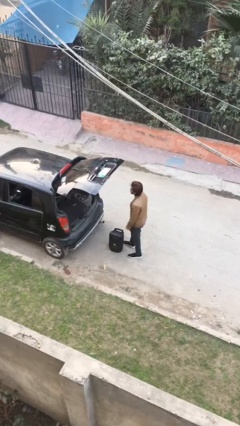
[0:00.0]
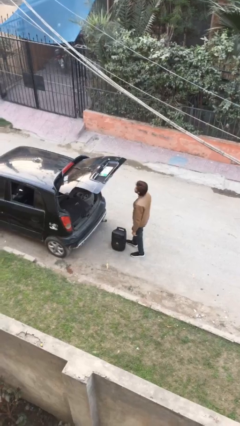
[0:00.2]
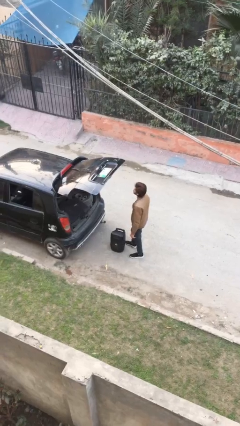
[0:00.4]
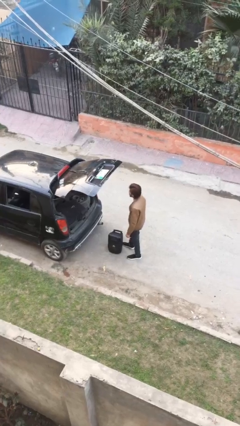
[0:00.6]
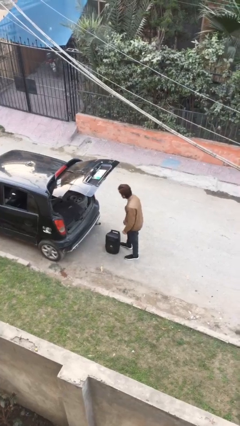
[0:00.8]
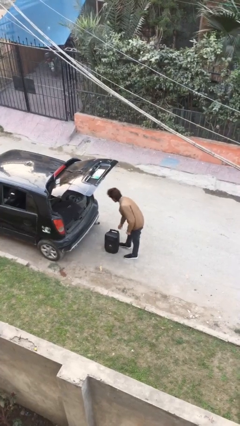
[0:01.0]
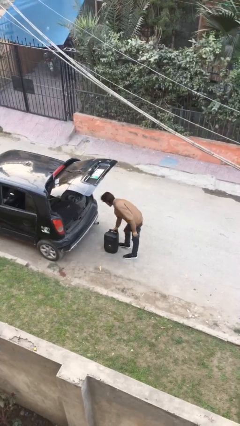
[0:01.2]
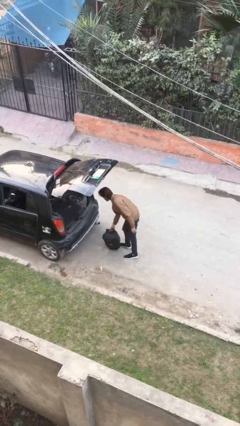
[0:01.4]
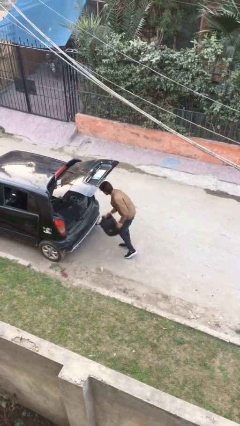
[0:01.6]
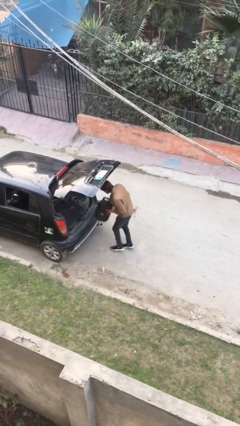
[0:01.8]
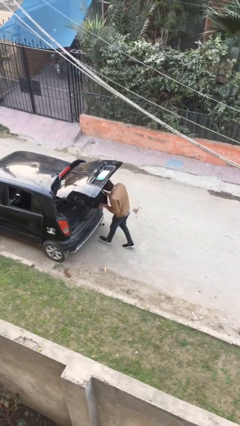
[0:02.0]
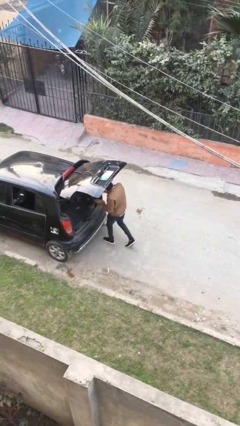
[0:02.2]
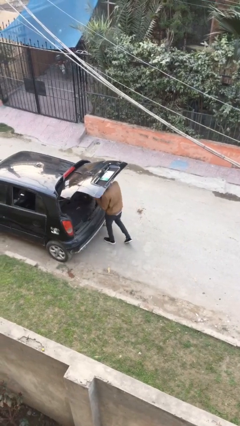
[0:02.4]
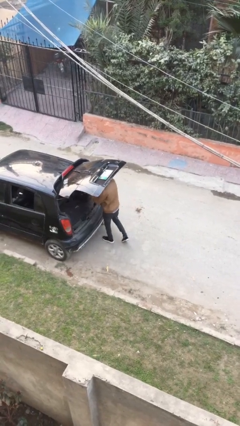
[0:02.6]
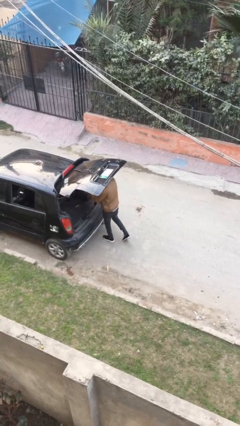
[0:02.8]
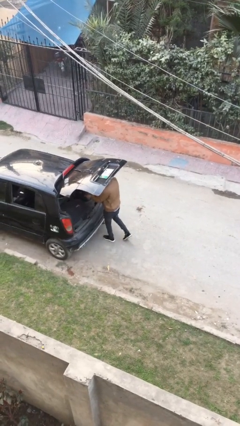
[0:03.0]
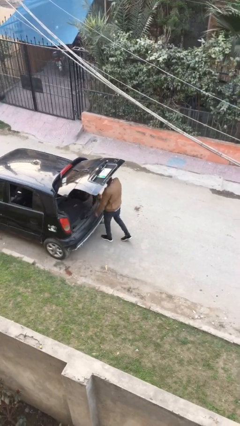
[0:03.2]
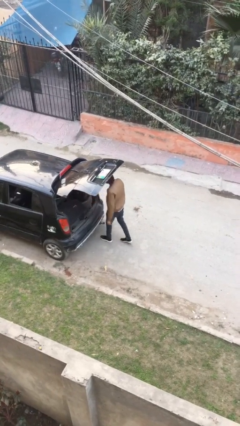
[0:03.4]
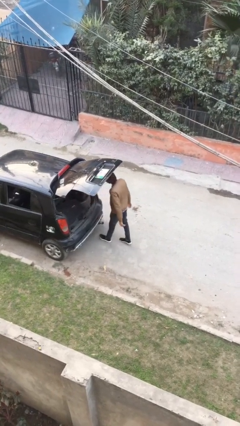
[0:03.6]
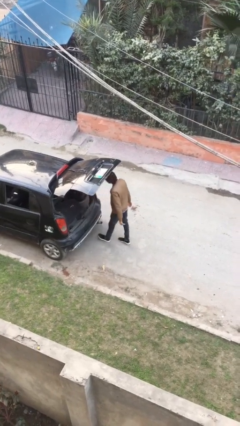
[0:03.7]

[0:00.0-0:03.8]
person loads car

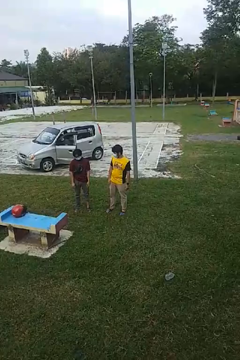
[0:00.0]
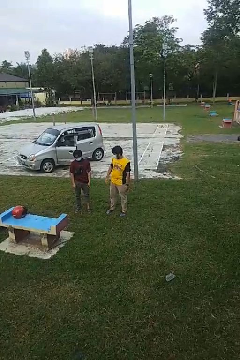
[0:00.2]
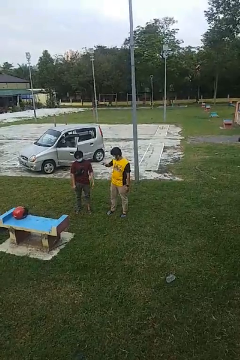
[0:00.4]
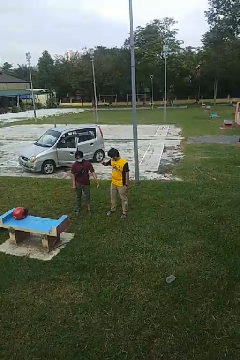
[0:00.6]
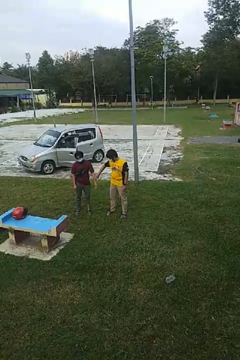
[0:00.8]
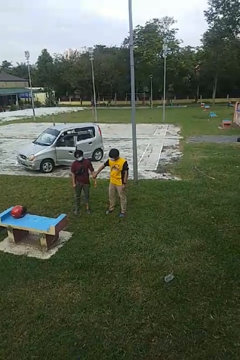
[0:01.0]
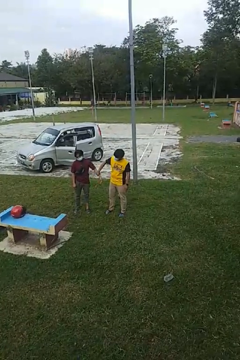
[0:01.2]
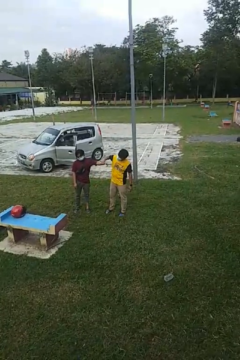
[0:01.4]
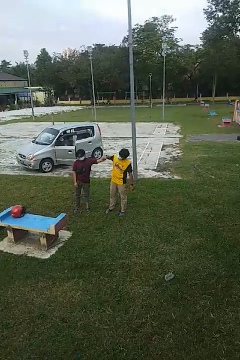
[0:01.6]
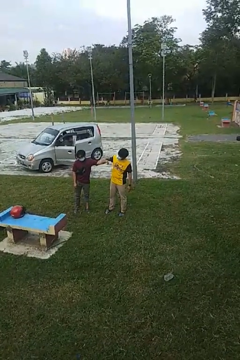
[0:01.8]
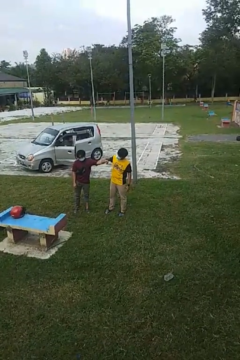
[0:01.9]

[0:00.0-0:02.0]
person grabs person by forearm

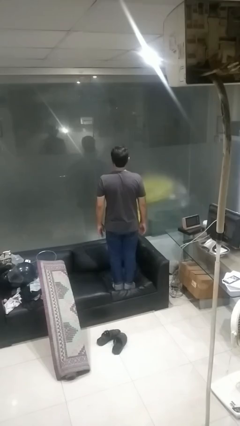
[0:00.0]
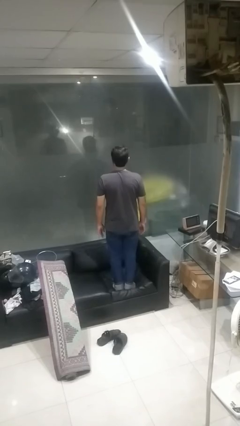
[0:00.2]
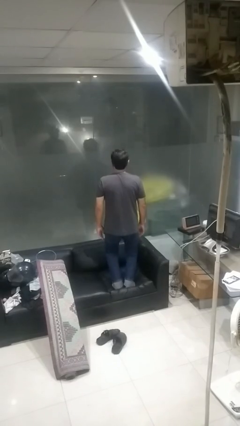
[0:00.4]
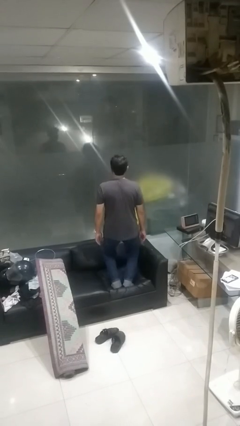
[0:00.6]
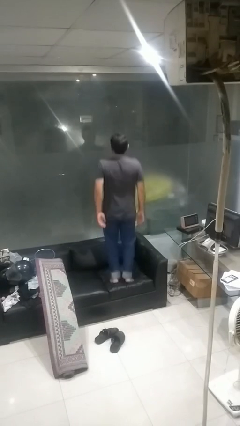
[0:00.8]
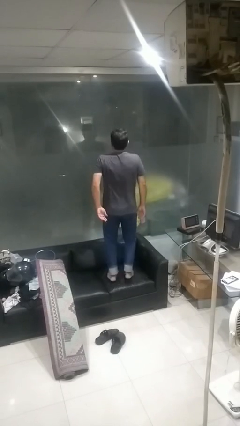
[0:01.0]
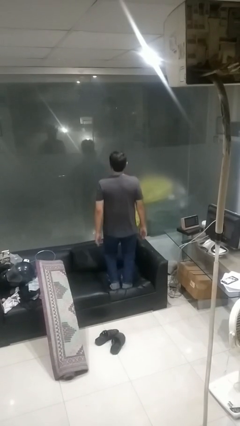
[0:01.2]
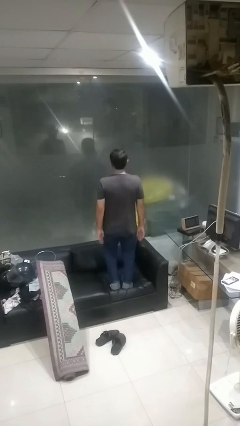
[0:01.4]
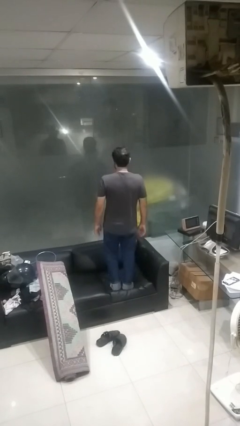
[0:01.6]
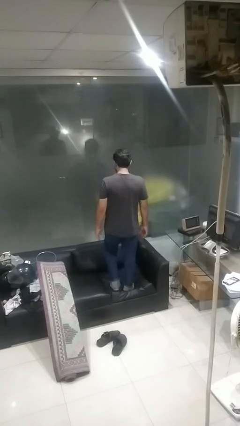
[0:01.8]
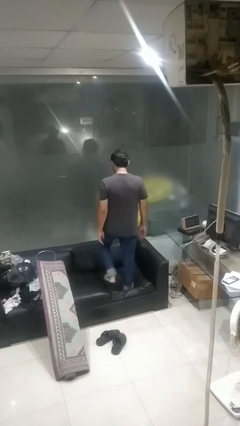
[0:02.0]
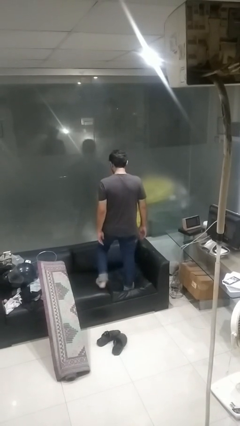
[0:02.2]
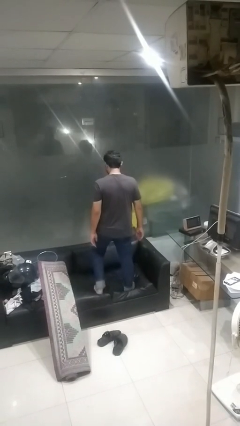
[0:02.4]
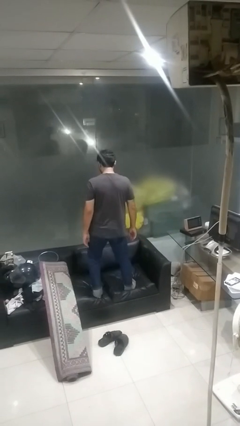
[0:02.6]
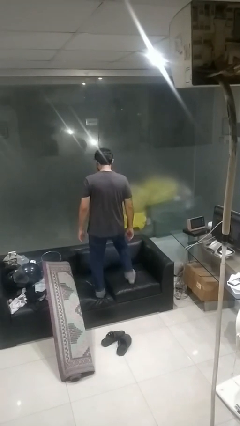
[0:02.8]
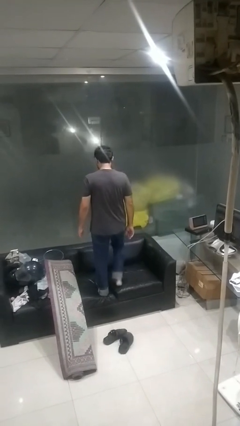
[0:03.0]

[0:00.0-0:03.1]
person jumps on couch

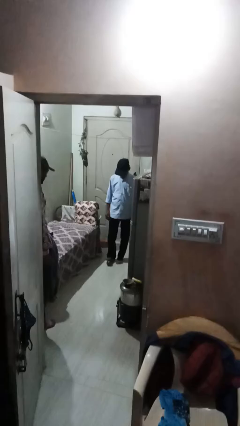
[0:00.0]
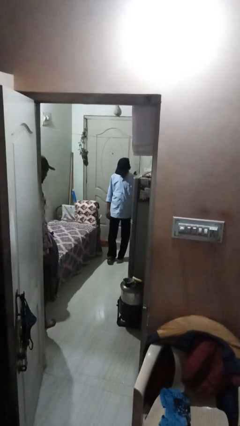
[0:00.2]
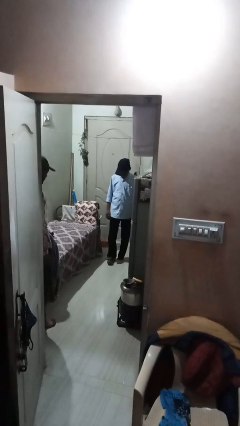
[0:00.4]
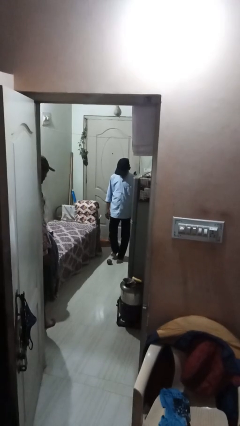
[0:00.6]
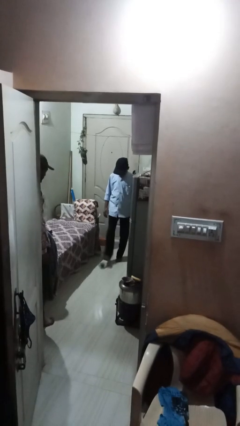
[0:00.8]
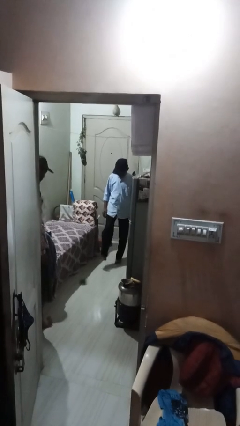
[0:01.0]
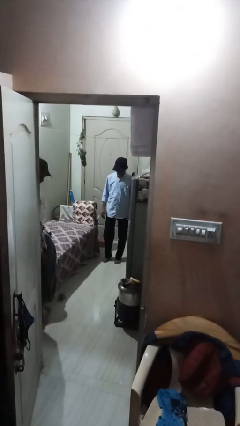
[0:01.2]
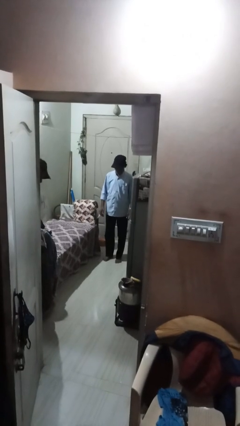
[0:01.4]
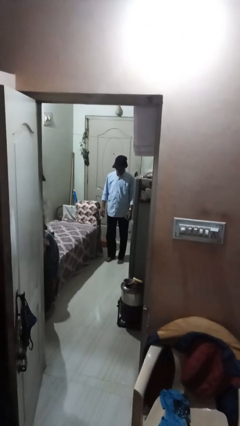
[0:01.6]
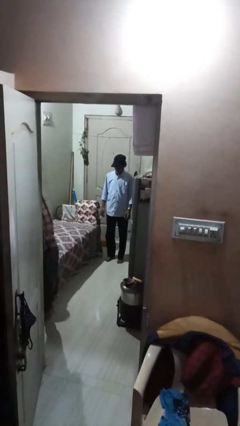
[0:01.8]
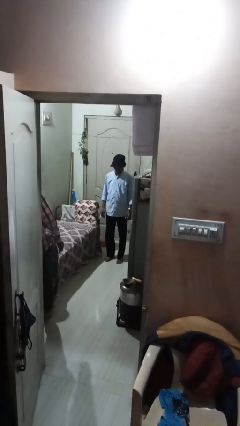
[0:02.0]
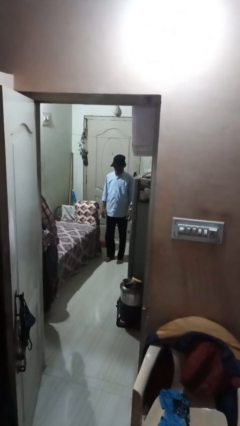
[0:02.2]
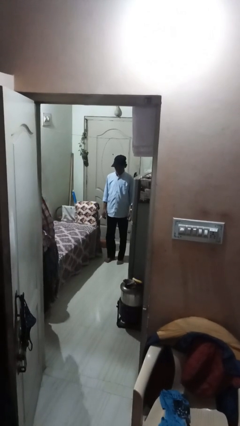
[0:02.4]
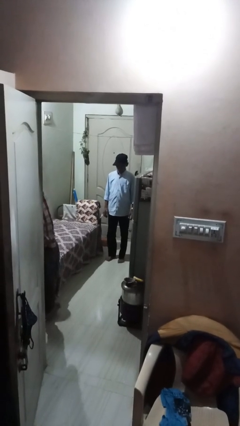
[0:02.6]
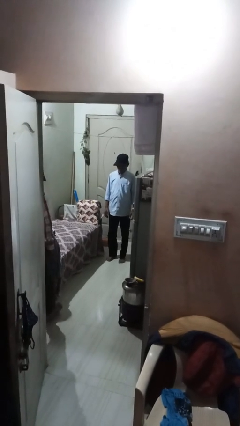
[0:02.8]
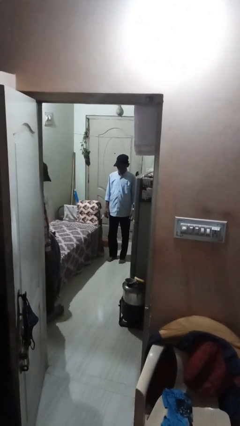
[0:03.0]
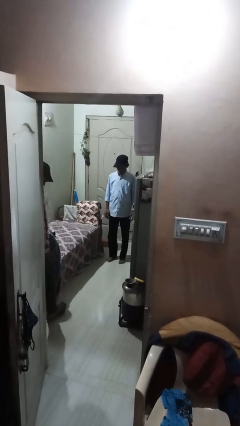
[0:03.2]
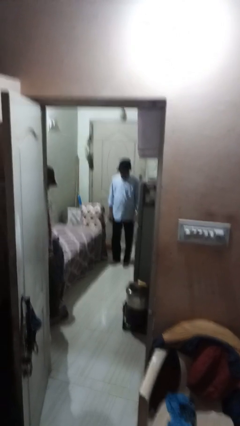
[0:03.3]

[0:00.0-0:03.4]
person kicks object to person

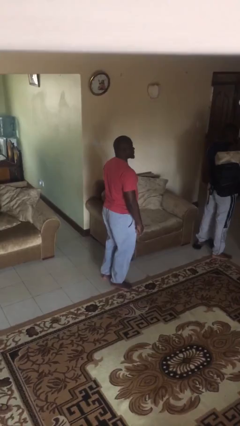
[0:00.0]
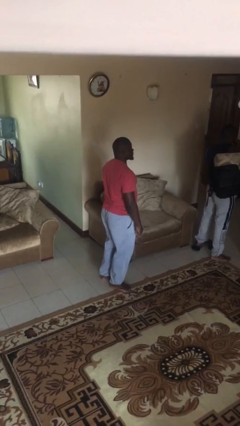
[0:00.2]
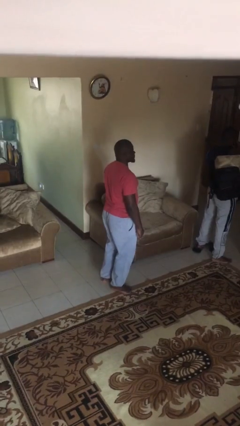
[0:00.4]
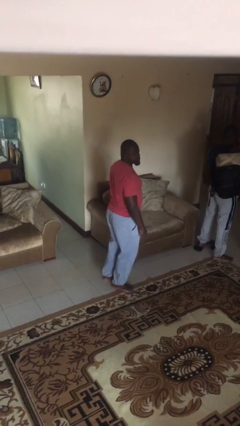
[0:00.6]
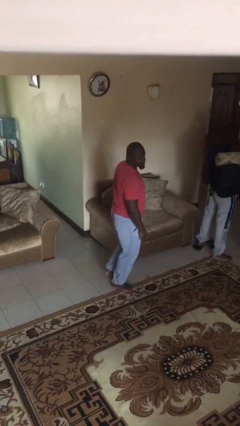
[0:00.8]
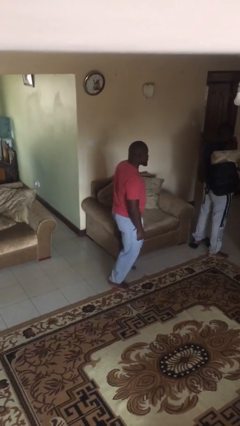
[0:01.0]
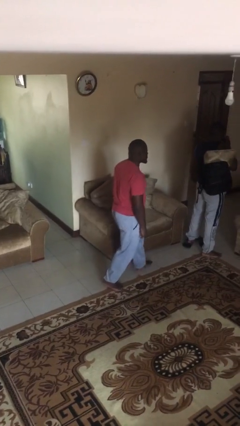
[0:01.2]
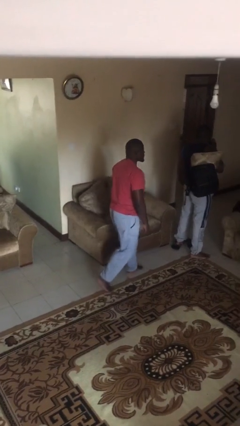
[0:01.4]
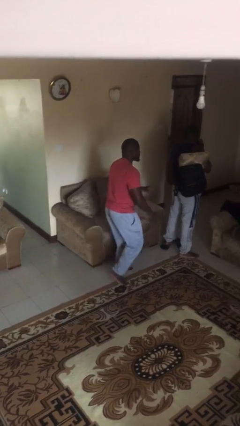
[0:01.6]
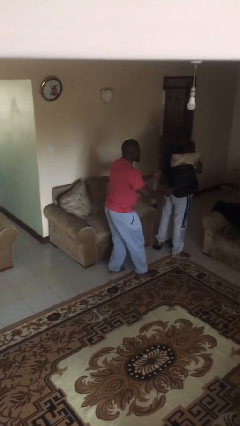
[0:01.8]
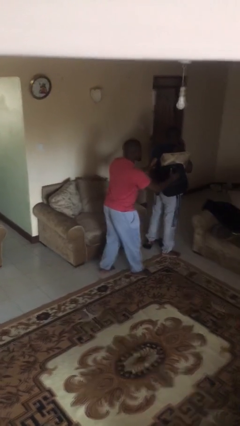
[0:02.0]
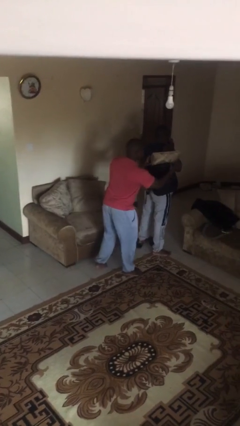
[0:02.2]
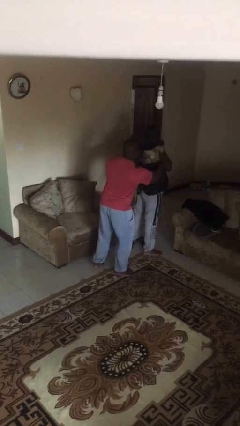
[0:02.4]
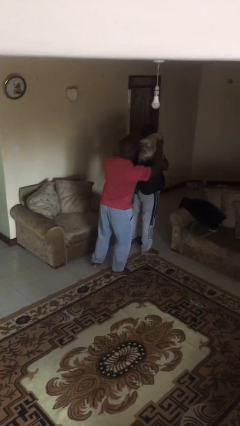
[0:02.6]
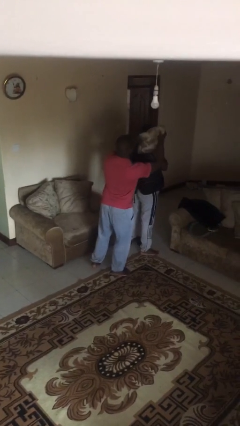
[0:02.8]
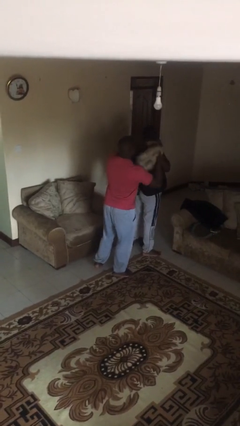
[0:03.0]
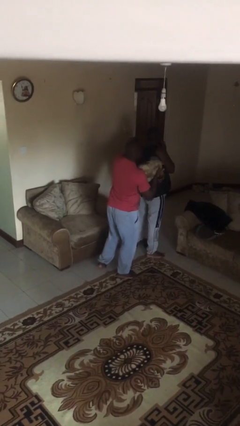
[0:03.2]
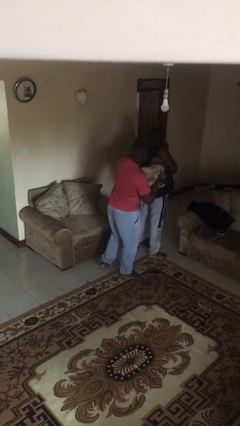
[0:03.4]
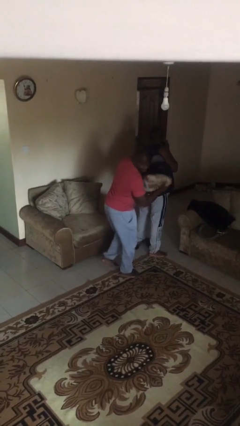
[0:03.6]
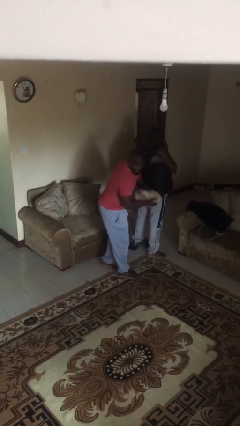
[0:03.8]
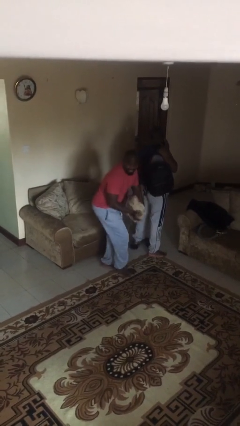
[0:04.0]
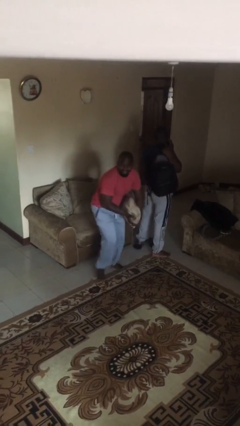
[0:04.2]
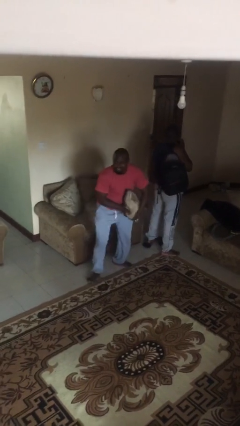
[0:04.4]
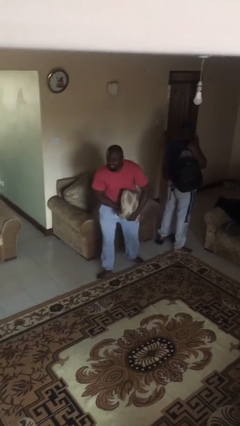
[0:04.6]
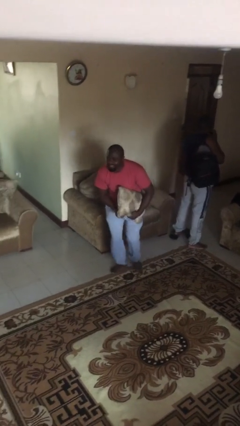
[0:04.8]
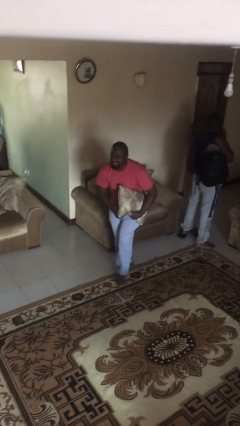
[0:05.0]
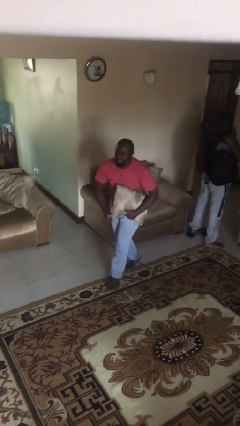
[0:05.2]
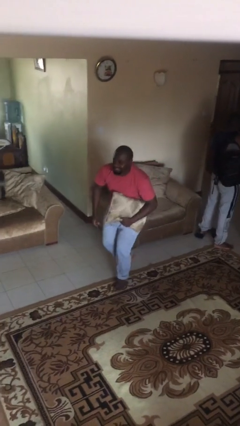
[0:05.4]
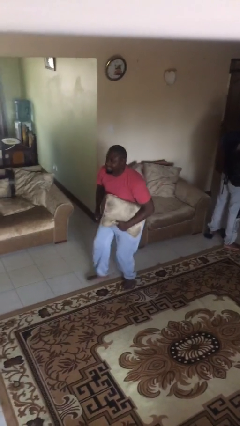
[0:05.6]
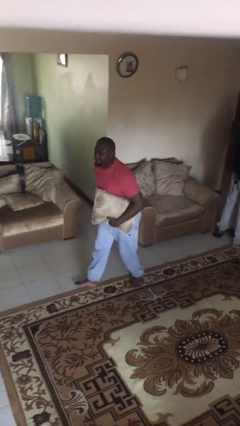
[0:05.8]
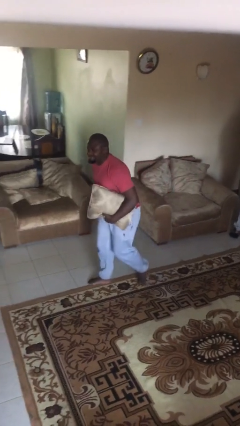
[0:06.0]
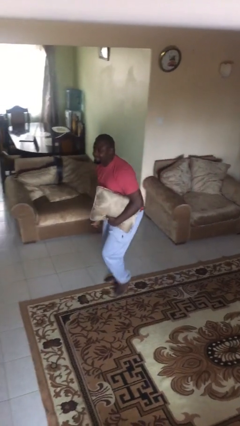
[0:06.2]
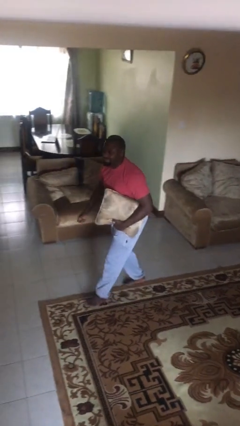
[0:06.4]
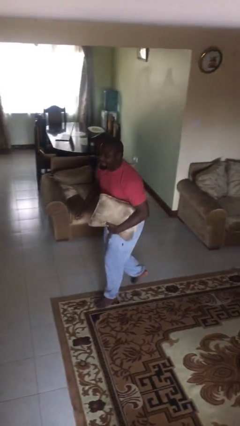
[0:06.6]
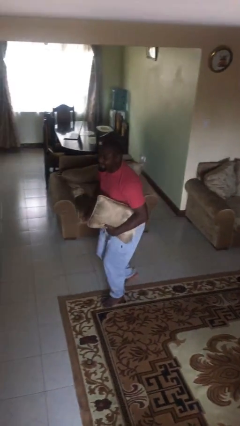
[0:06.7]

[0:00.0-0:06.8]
person steals object from person
